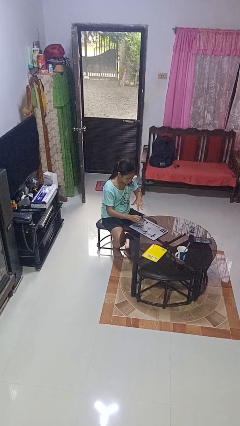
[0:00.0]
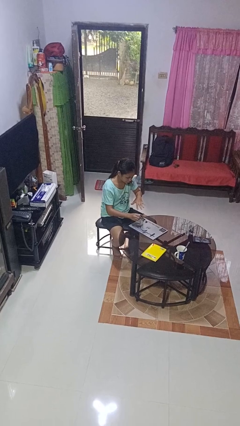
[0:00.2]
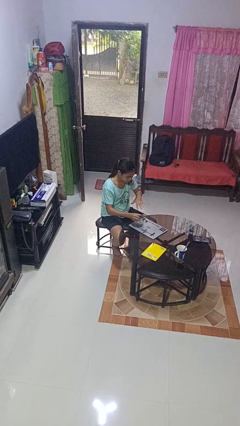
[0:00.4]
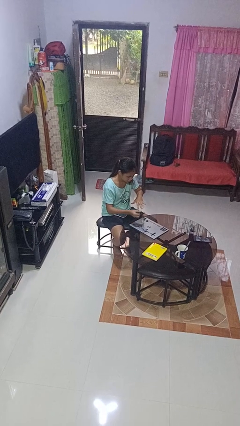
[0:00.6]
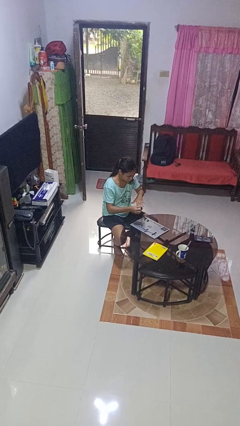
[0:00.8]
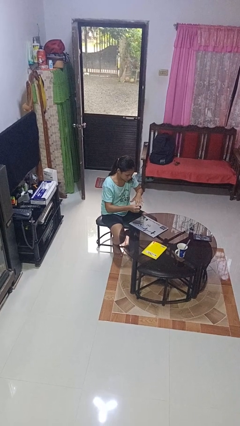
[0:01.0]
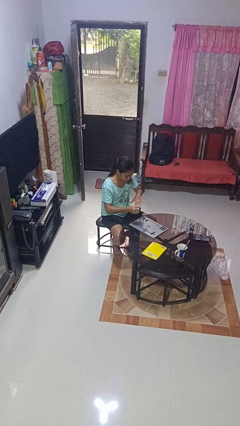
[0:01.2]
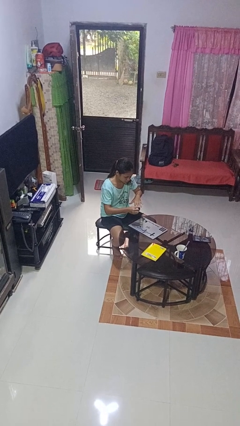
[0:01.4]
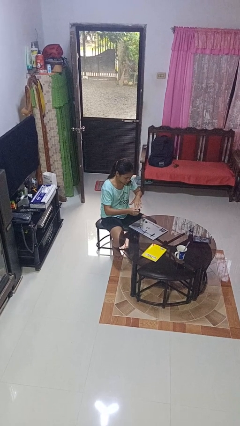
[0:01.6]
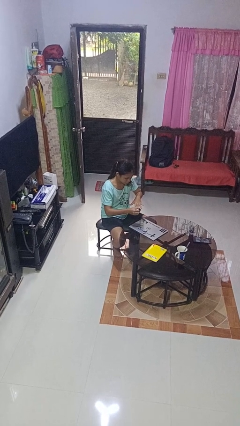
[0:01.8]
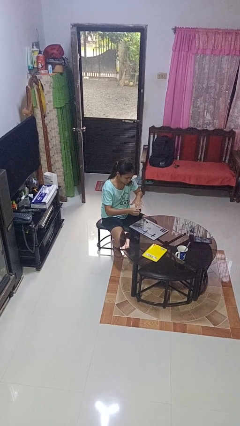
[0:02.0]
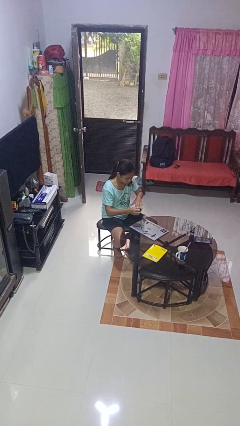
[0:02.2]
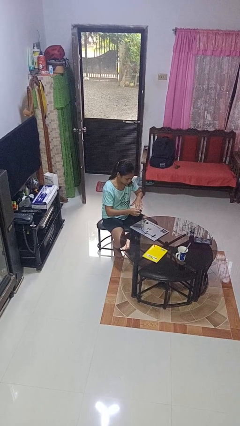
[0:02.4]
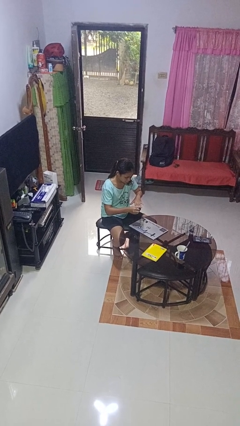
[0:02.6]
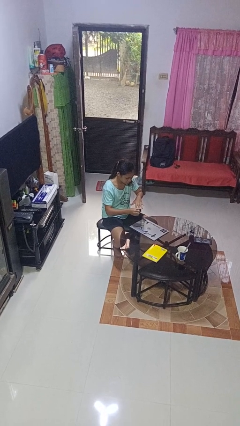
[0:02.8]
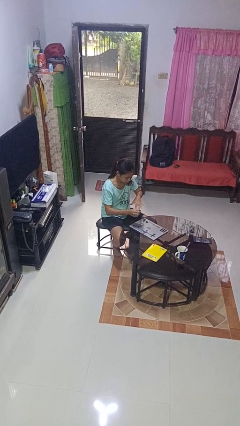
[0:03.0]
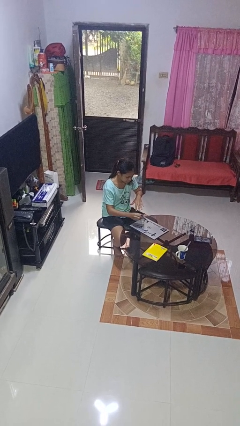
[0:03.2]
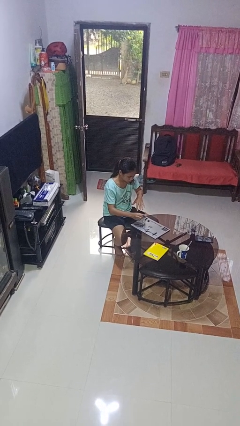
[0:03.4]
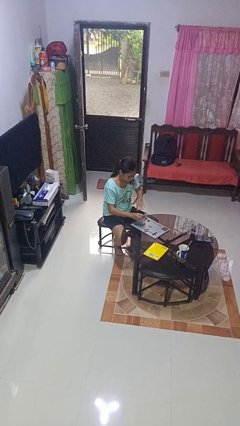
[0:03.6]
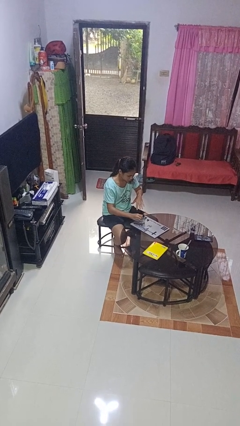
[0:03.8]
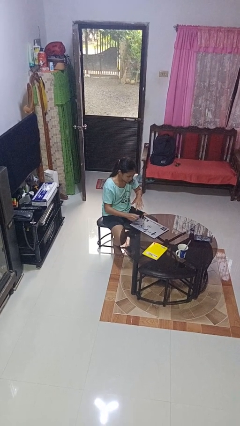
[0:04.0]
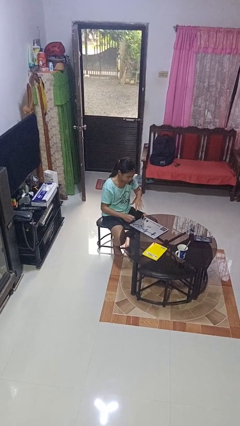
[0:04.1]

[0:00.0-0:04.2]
person paints fingernails

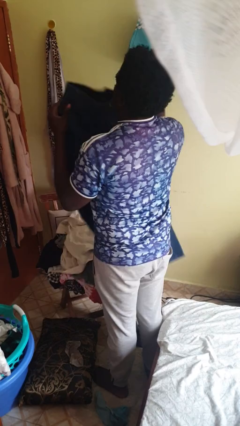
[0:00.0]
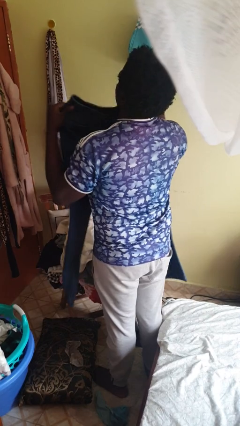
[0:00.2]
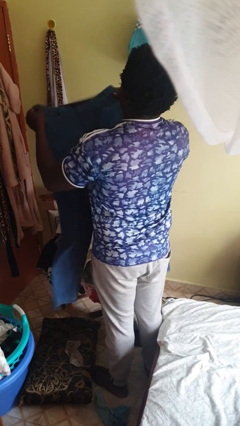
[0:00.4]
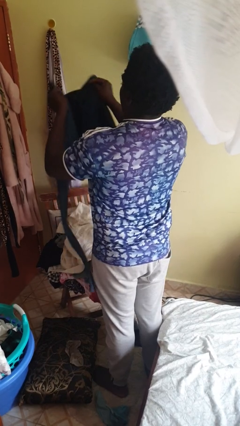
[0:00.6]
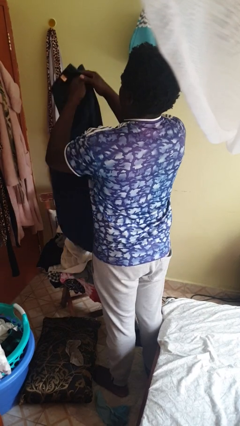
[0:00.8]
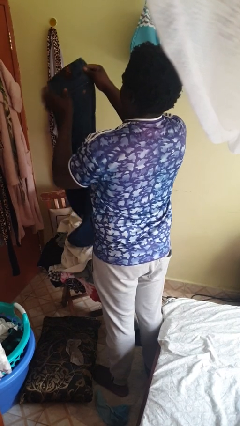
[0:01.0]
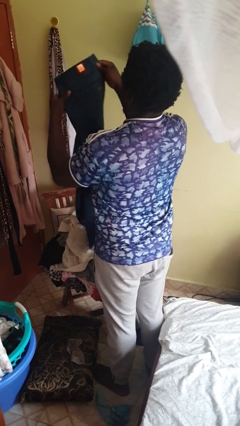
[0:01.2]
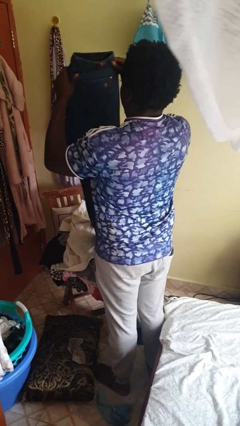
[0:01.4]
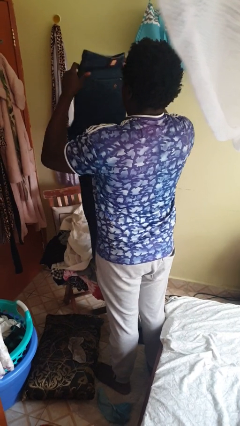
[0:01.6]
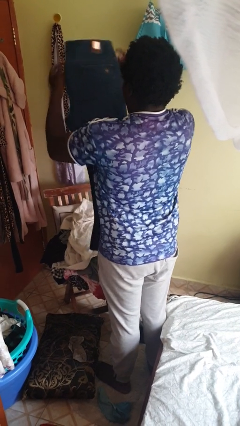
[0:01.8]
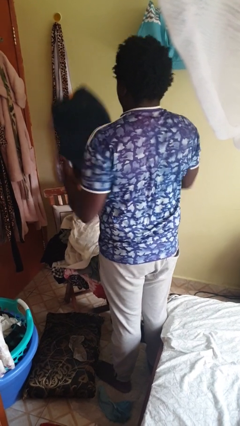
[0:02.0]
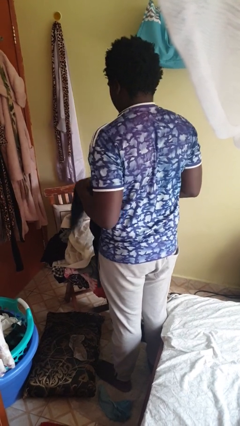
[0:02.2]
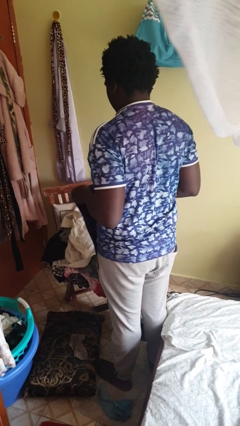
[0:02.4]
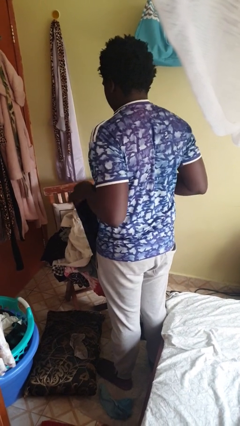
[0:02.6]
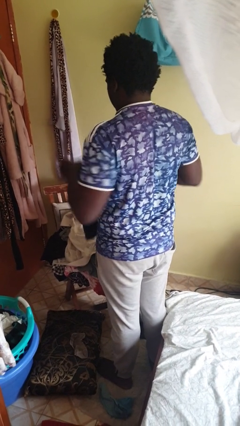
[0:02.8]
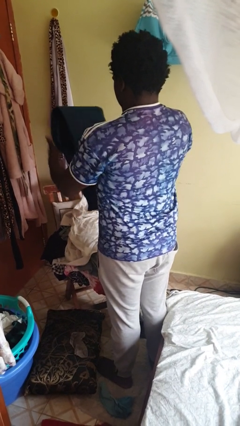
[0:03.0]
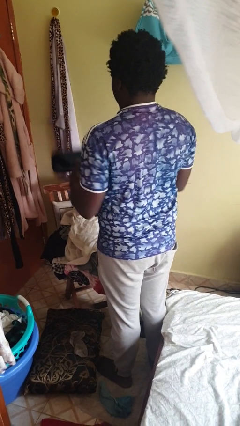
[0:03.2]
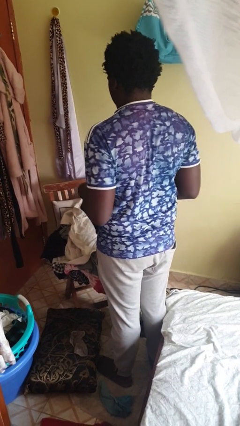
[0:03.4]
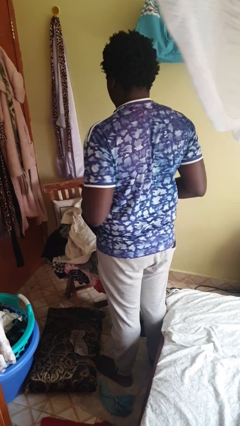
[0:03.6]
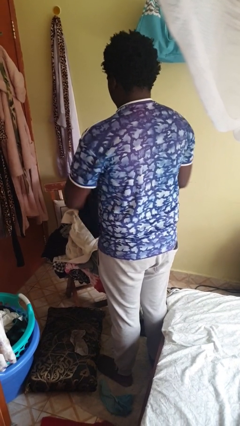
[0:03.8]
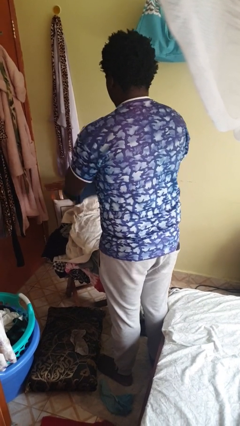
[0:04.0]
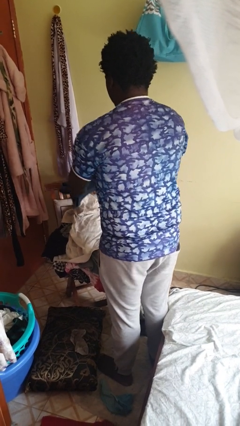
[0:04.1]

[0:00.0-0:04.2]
person folds pants

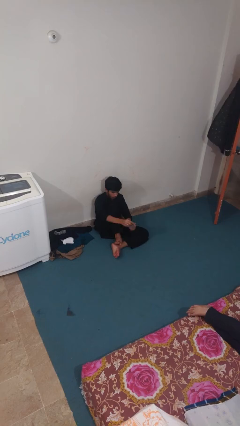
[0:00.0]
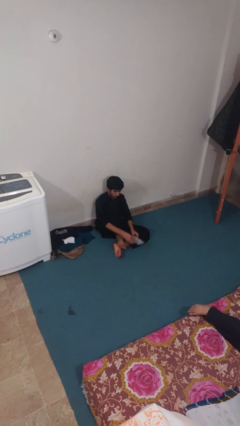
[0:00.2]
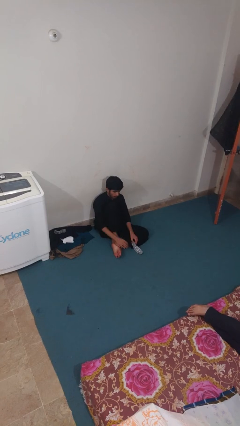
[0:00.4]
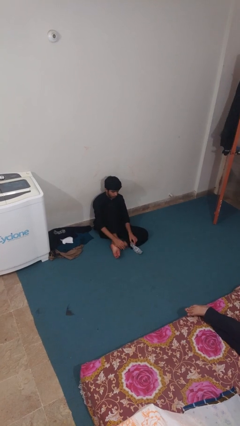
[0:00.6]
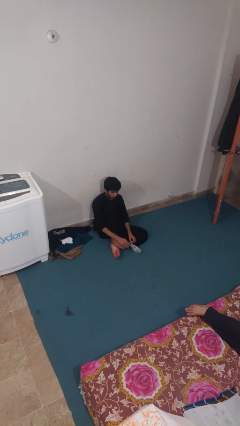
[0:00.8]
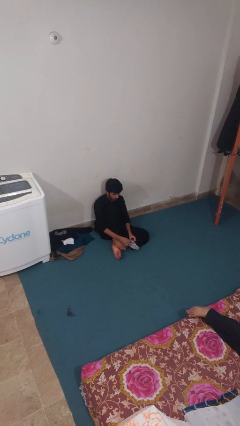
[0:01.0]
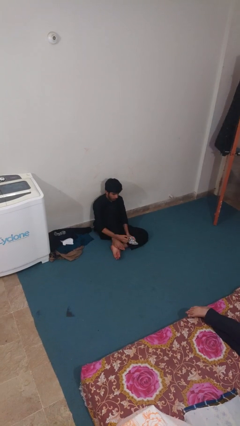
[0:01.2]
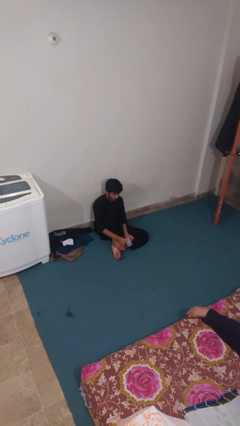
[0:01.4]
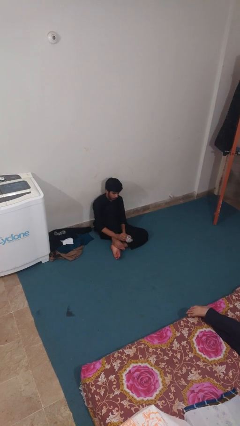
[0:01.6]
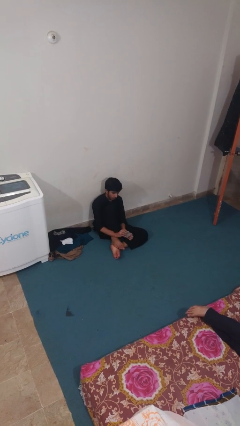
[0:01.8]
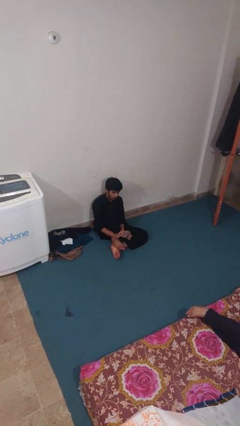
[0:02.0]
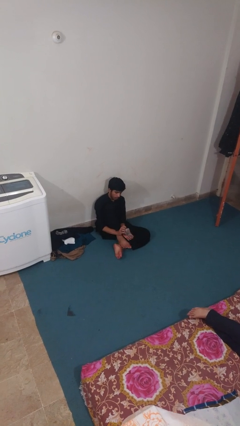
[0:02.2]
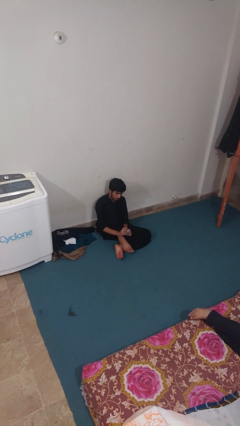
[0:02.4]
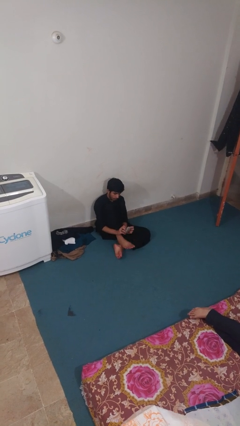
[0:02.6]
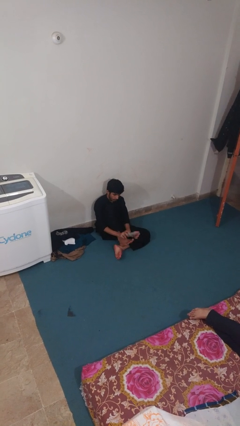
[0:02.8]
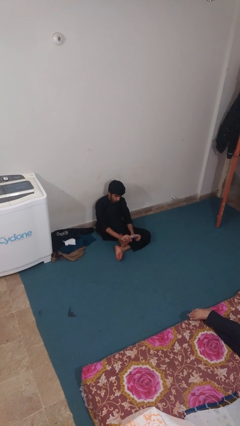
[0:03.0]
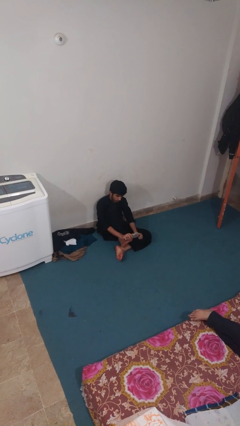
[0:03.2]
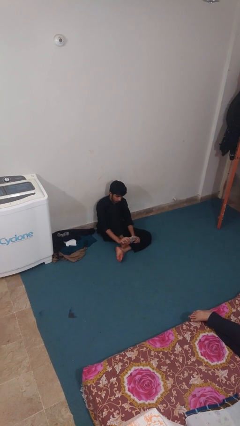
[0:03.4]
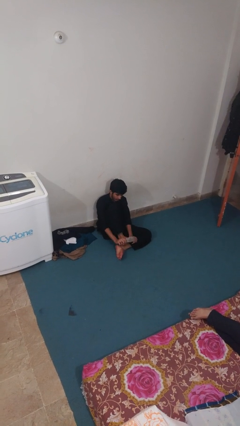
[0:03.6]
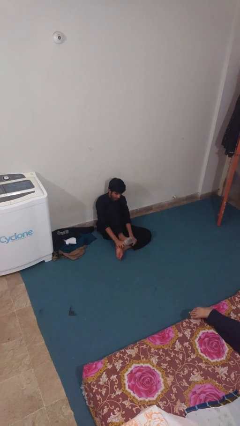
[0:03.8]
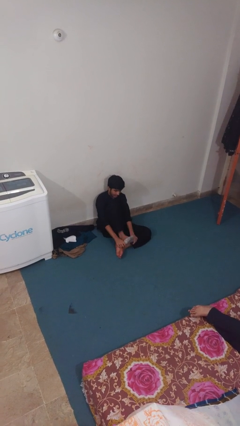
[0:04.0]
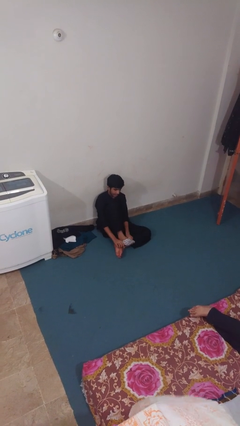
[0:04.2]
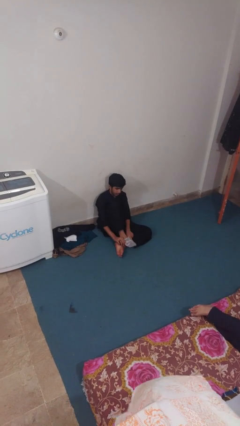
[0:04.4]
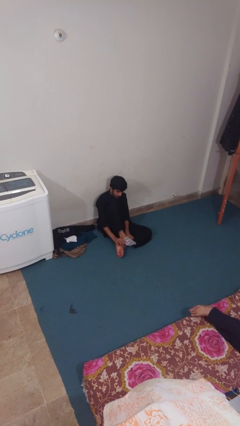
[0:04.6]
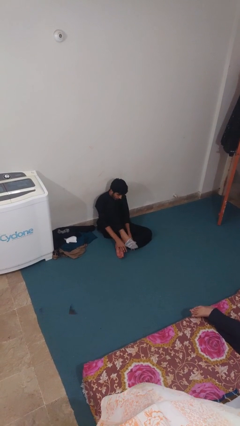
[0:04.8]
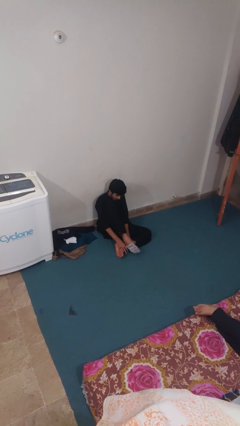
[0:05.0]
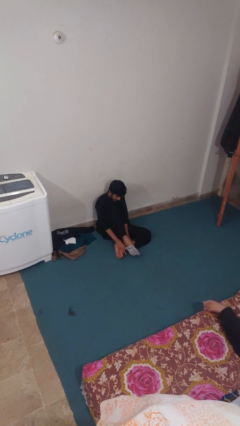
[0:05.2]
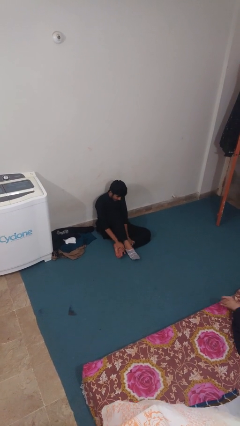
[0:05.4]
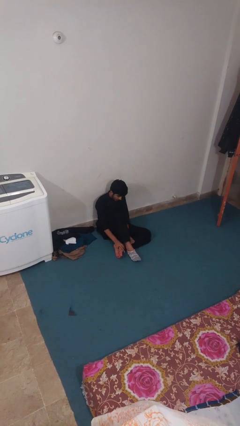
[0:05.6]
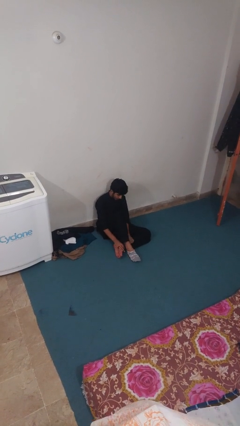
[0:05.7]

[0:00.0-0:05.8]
person puts on socks

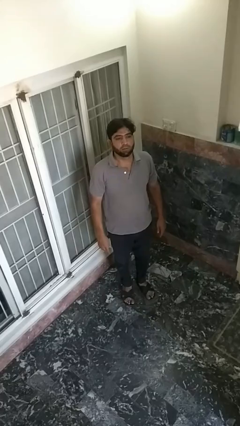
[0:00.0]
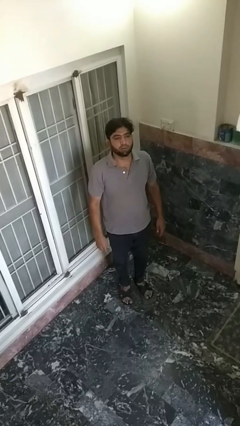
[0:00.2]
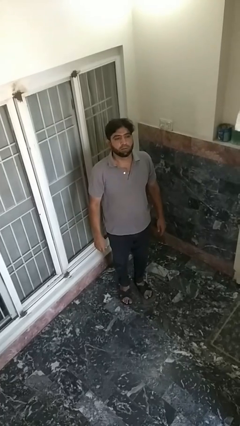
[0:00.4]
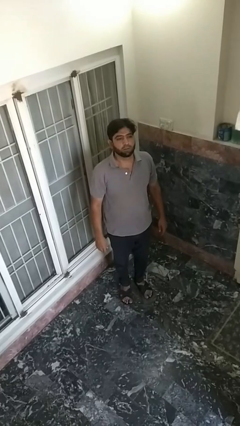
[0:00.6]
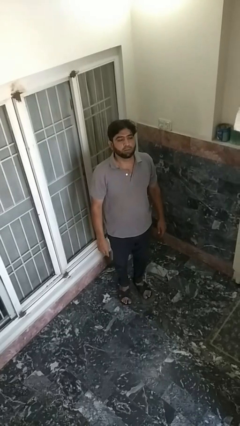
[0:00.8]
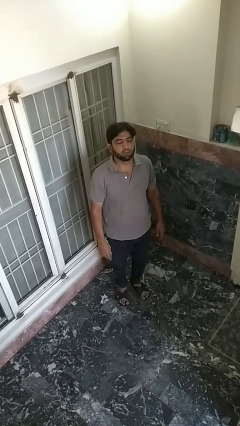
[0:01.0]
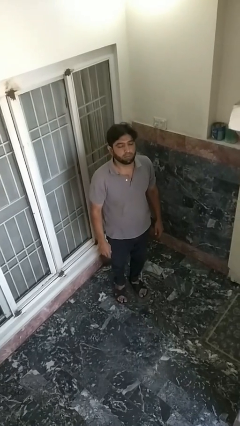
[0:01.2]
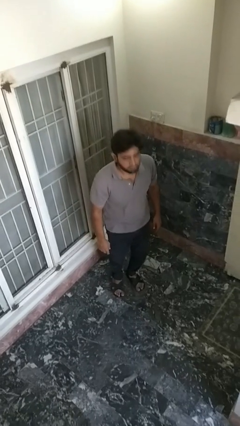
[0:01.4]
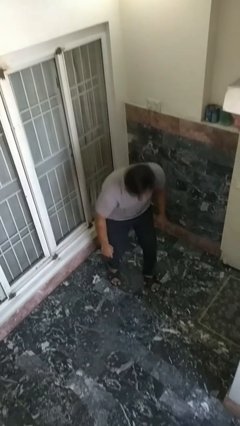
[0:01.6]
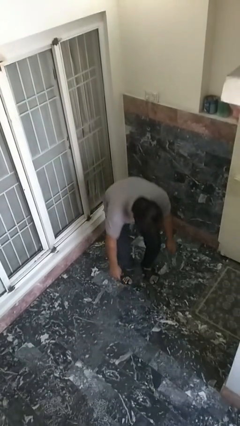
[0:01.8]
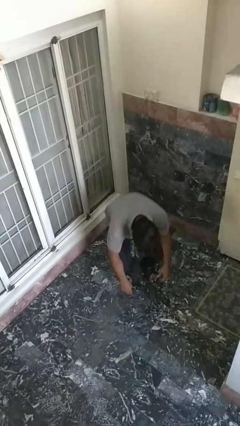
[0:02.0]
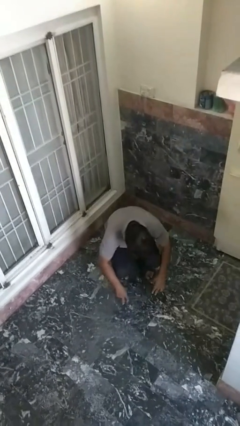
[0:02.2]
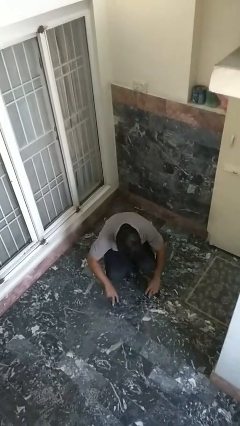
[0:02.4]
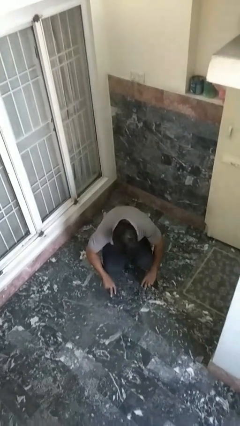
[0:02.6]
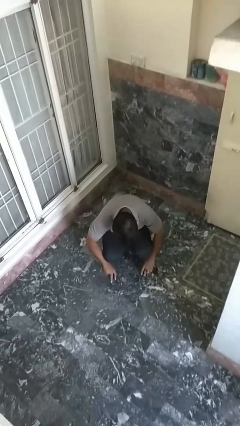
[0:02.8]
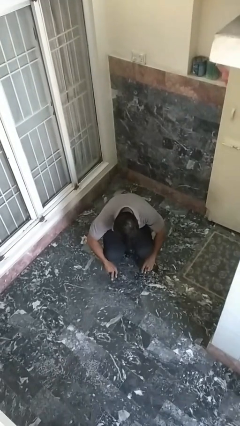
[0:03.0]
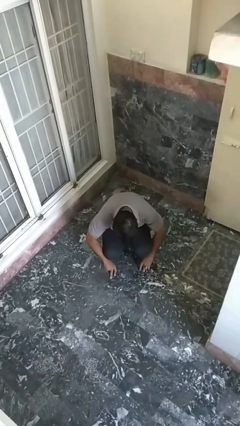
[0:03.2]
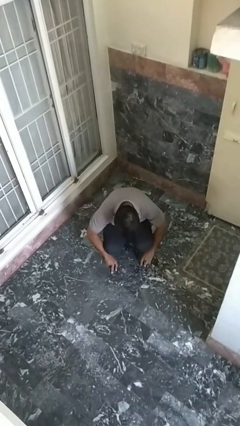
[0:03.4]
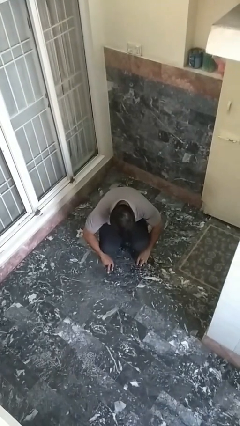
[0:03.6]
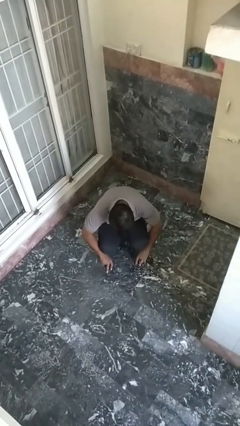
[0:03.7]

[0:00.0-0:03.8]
person falls while standing
